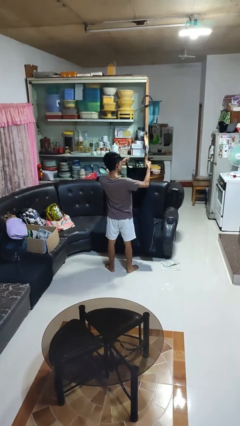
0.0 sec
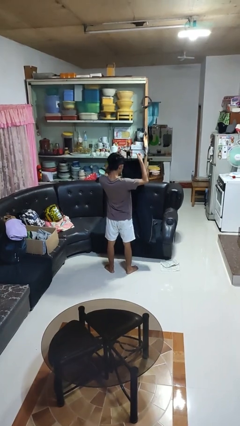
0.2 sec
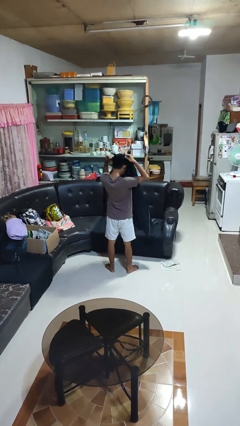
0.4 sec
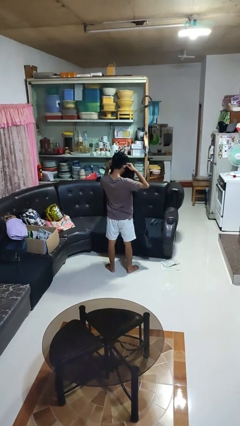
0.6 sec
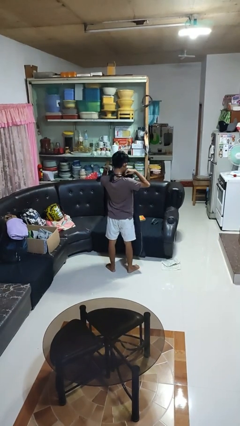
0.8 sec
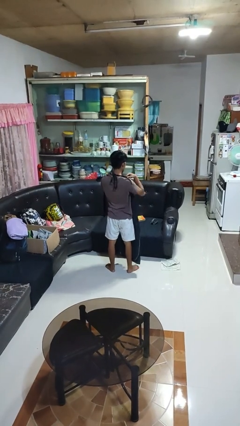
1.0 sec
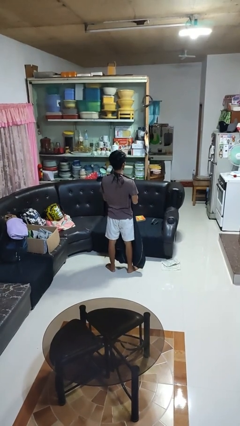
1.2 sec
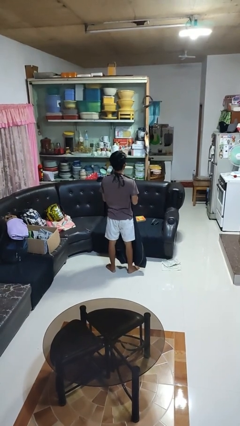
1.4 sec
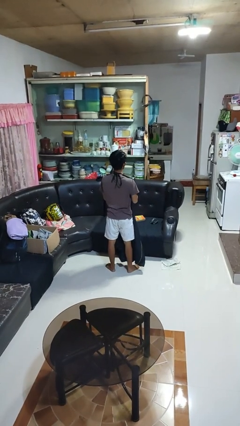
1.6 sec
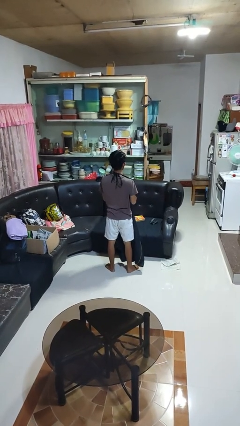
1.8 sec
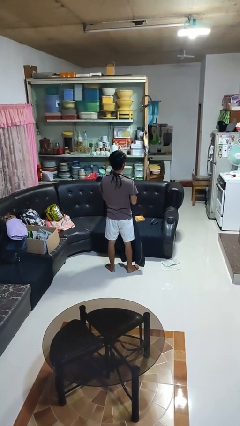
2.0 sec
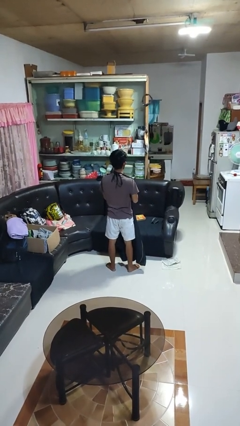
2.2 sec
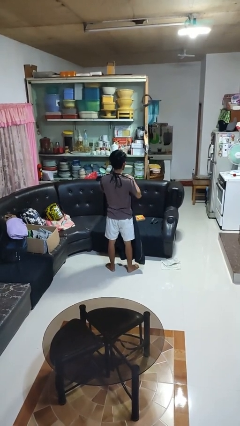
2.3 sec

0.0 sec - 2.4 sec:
person puts on apron

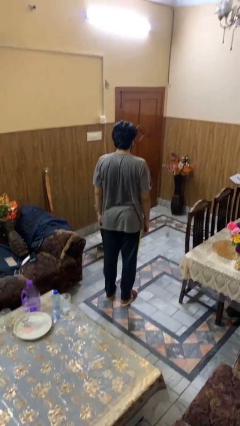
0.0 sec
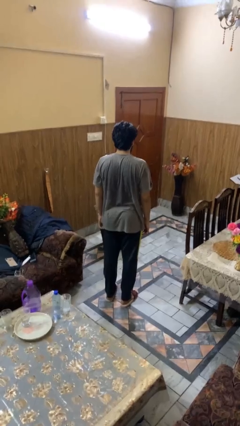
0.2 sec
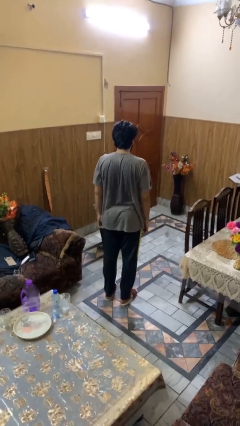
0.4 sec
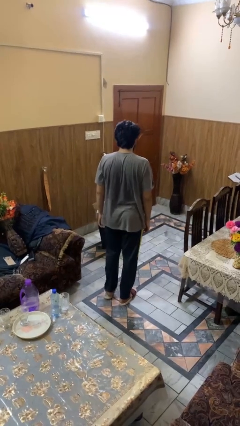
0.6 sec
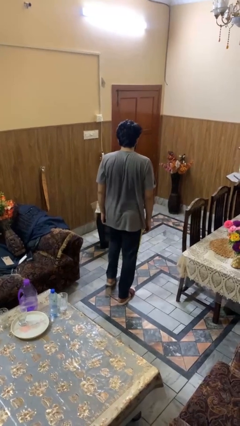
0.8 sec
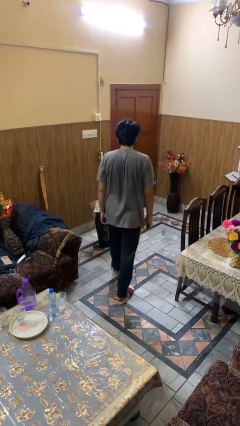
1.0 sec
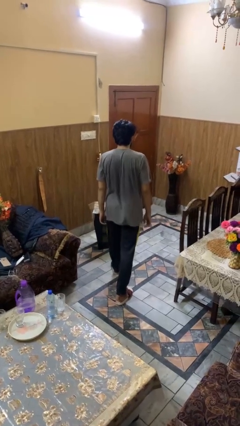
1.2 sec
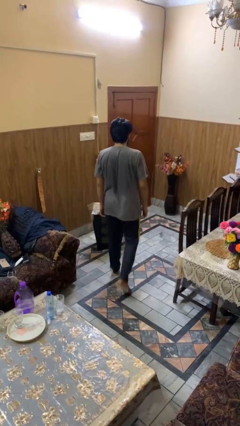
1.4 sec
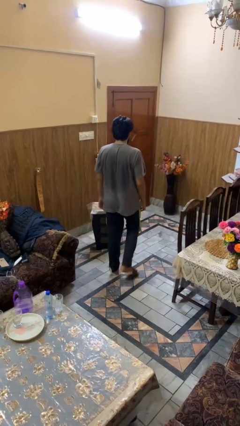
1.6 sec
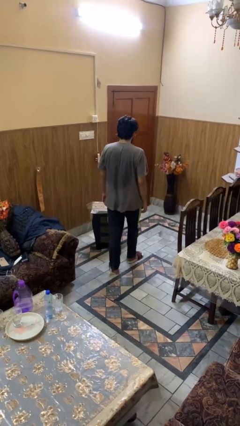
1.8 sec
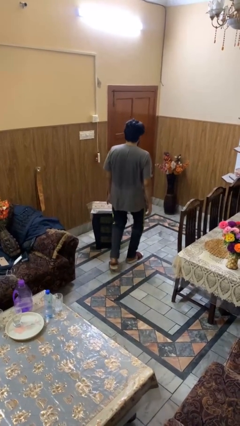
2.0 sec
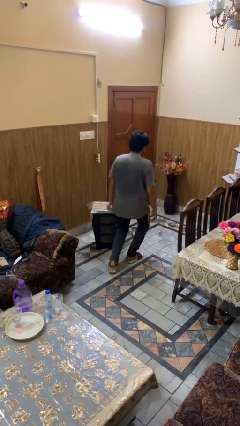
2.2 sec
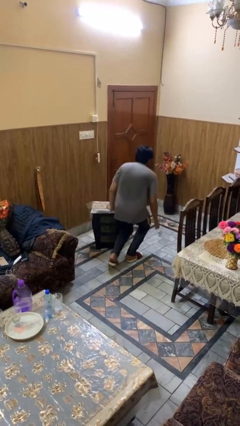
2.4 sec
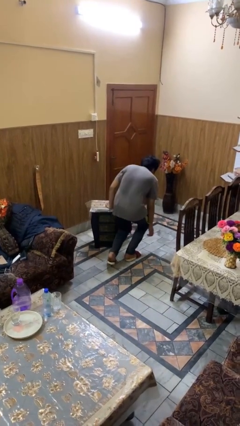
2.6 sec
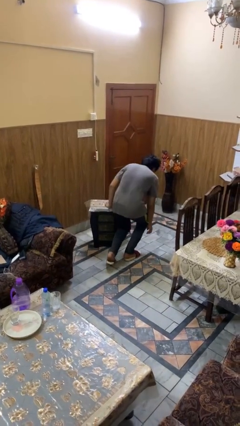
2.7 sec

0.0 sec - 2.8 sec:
person trips on object on floor

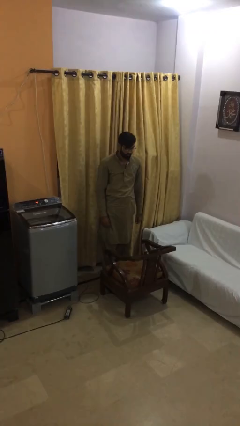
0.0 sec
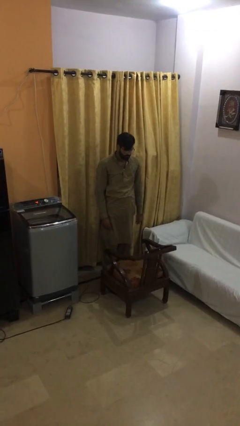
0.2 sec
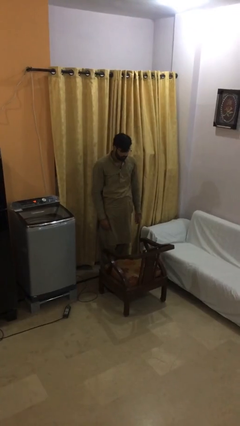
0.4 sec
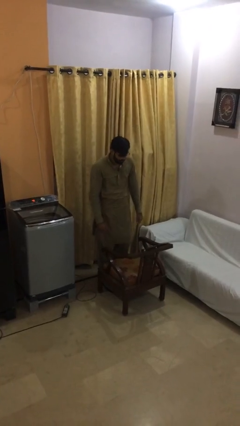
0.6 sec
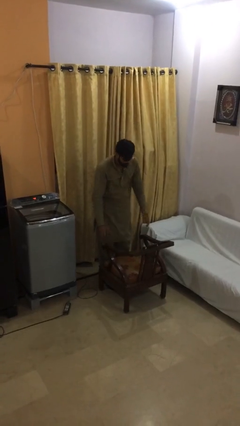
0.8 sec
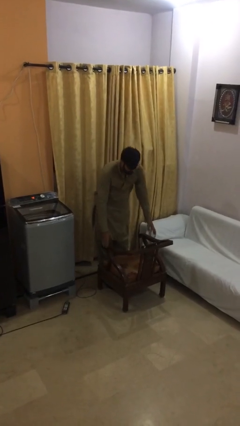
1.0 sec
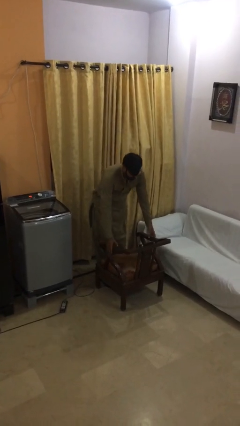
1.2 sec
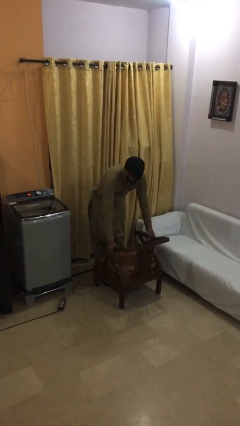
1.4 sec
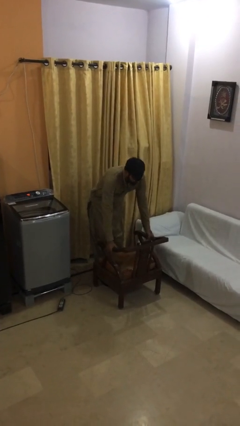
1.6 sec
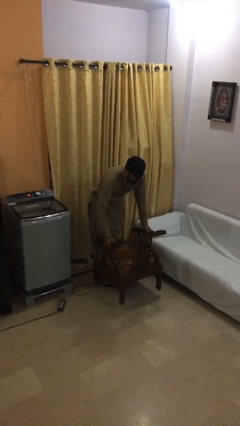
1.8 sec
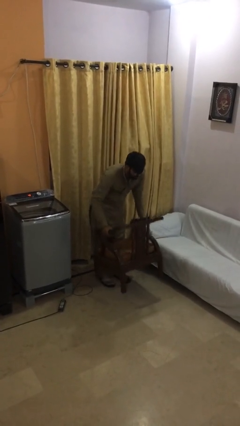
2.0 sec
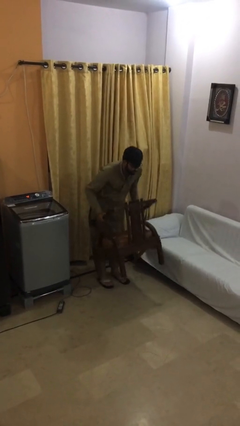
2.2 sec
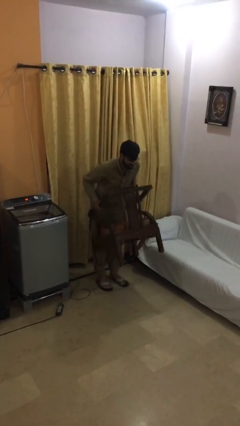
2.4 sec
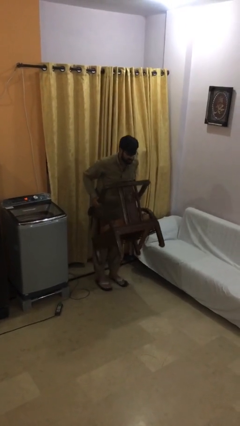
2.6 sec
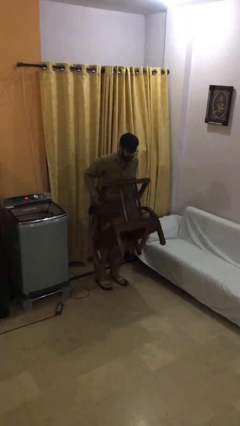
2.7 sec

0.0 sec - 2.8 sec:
person picks up object from floor

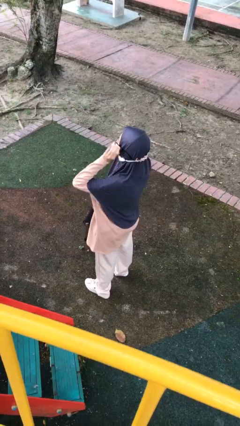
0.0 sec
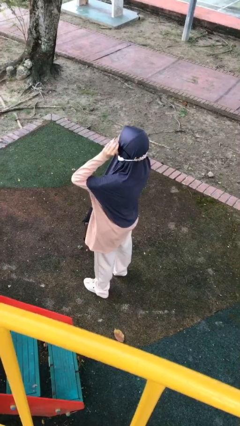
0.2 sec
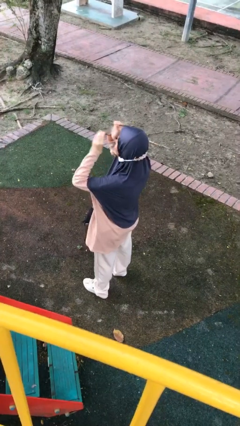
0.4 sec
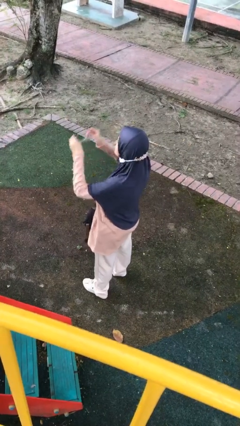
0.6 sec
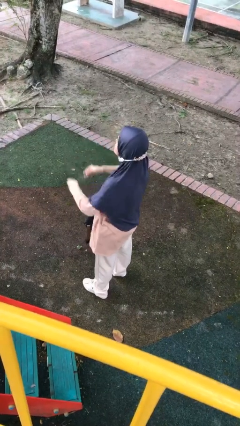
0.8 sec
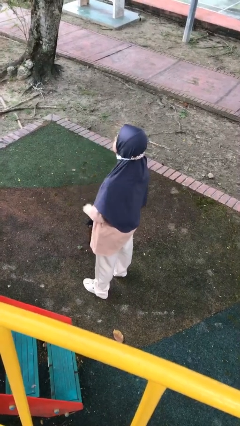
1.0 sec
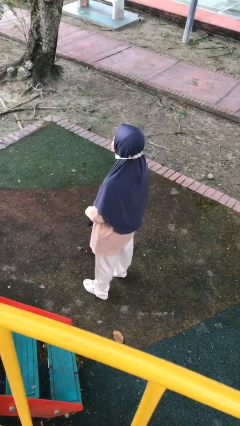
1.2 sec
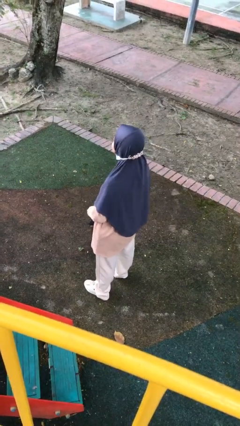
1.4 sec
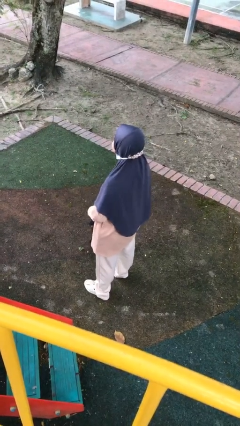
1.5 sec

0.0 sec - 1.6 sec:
person takes off glasses

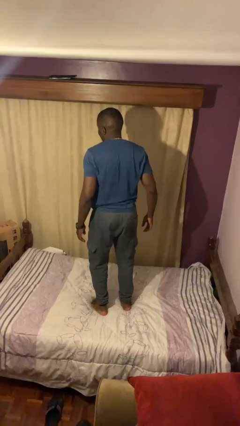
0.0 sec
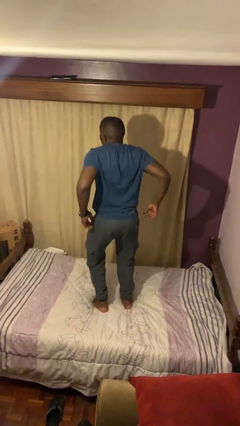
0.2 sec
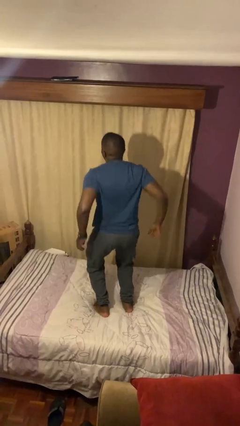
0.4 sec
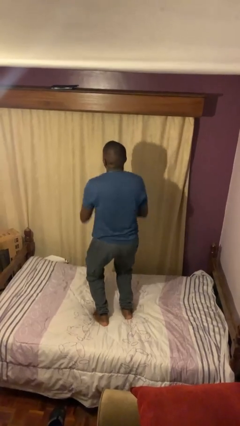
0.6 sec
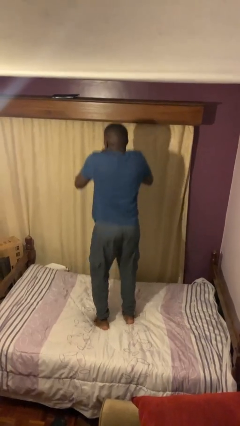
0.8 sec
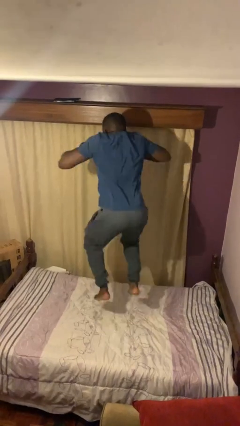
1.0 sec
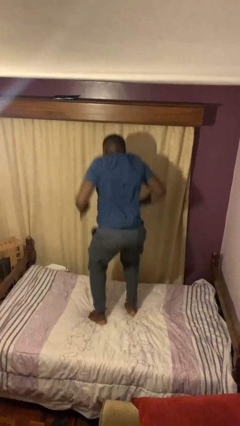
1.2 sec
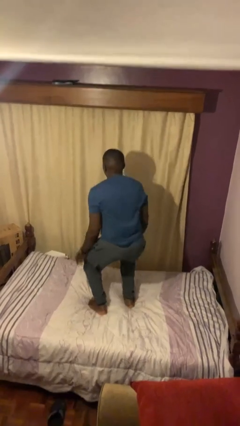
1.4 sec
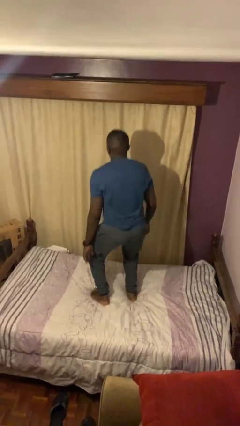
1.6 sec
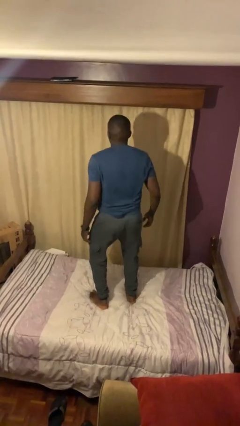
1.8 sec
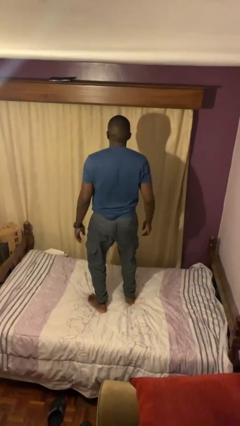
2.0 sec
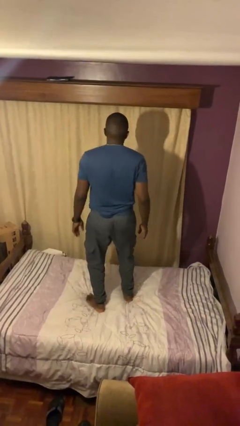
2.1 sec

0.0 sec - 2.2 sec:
person jumps on bed

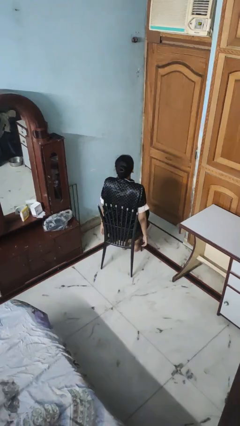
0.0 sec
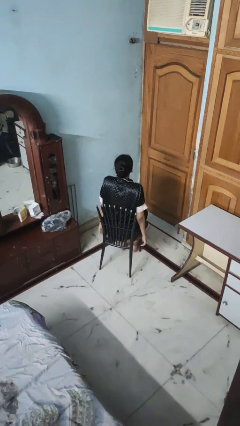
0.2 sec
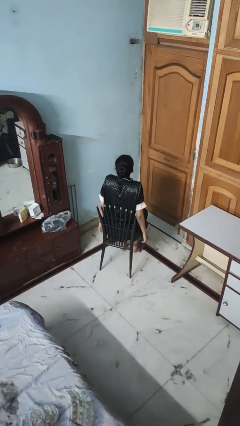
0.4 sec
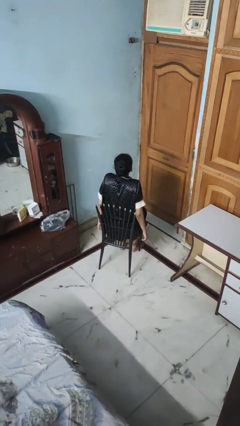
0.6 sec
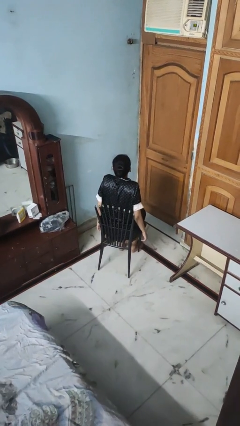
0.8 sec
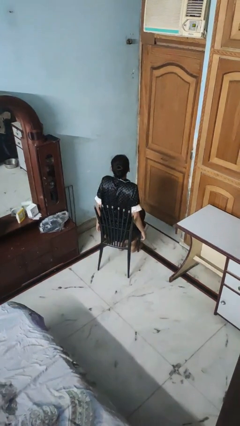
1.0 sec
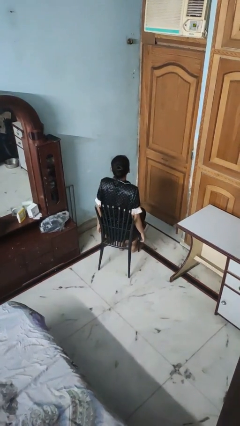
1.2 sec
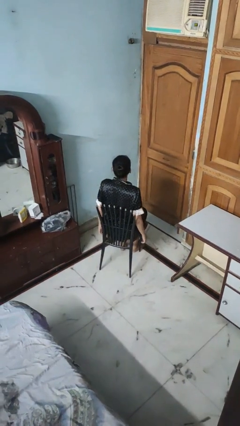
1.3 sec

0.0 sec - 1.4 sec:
person shrugs

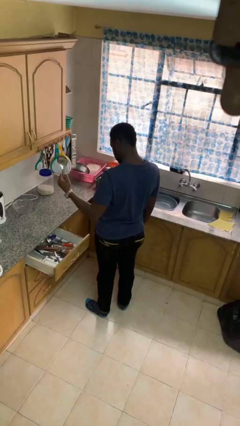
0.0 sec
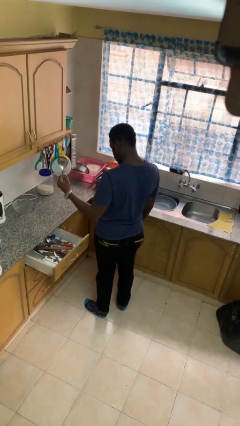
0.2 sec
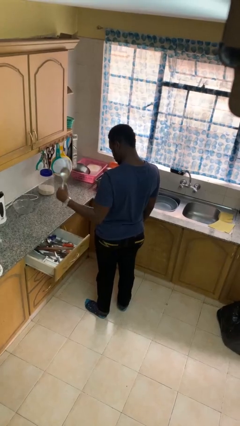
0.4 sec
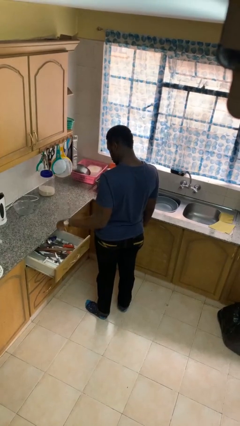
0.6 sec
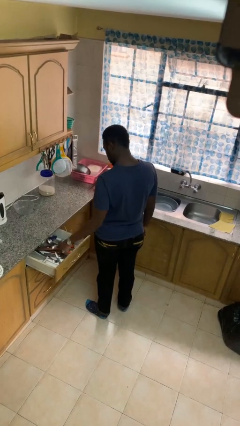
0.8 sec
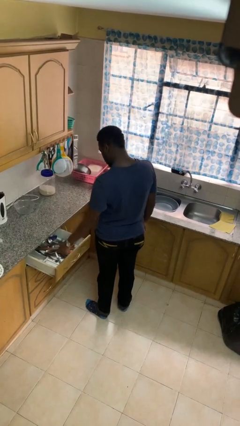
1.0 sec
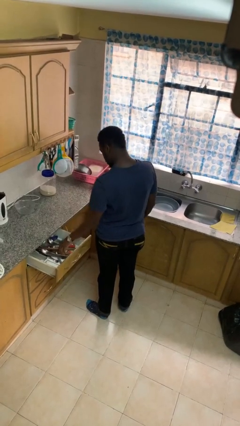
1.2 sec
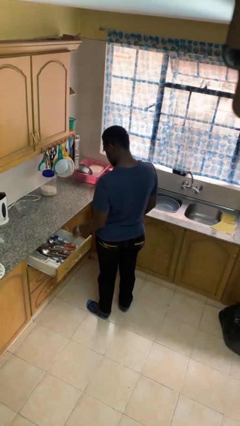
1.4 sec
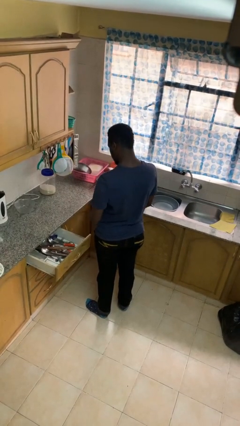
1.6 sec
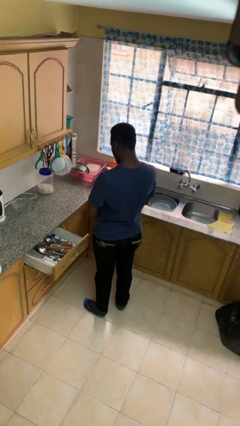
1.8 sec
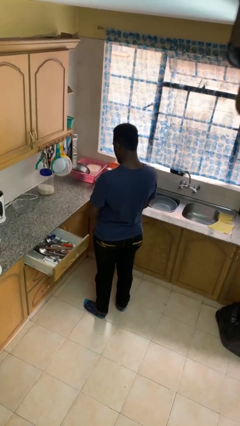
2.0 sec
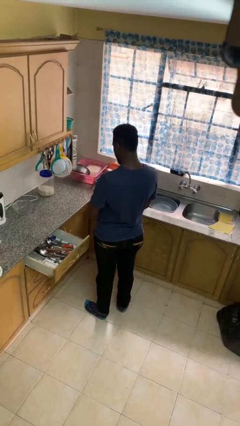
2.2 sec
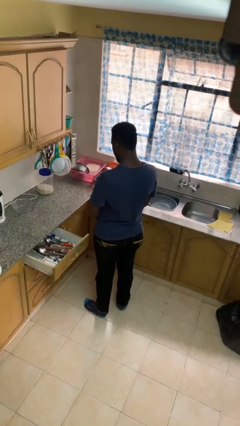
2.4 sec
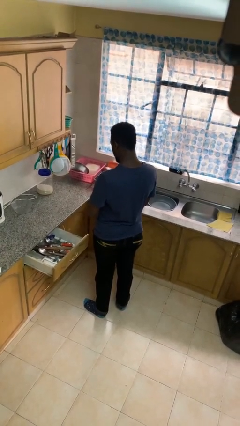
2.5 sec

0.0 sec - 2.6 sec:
person puts object into kitchen drawer

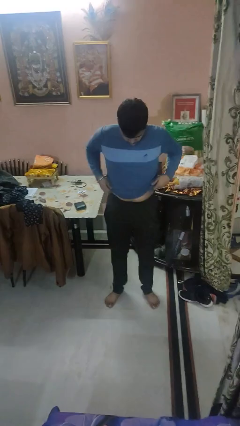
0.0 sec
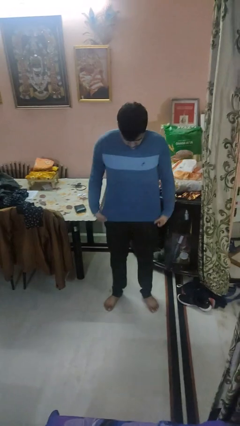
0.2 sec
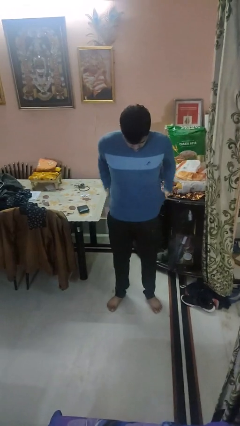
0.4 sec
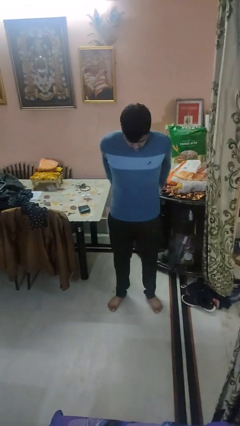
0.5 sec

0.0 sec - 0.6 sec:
person untucks shirt

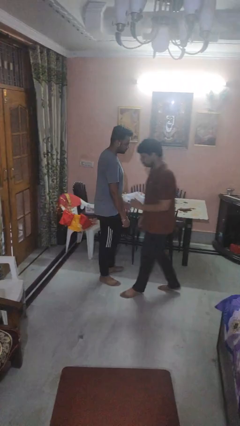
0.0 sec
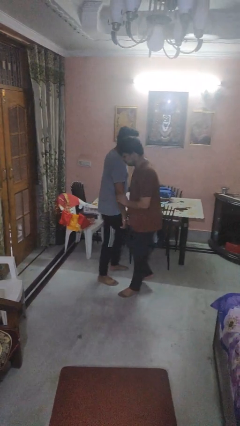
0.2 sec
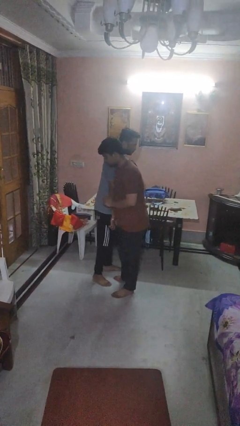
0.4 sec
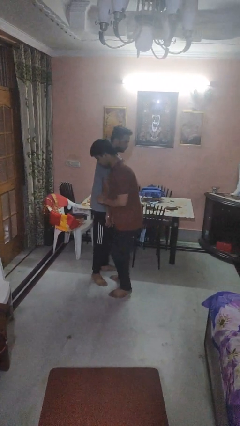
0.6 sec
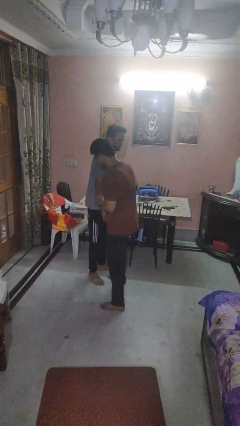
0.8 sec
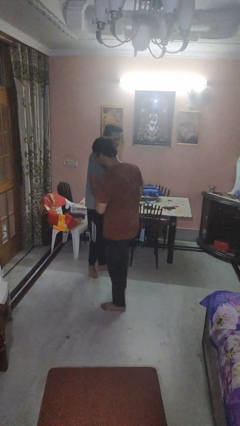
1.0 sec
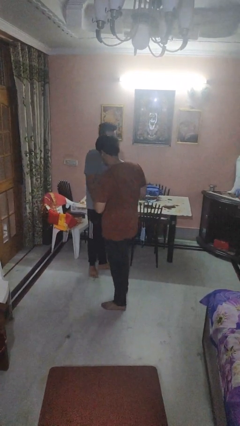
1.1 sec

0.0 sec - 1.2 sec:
person bumps into person
